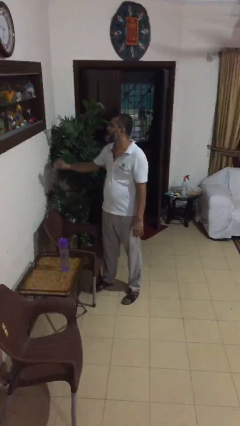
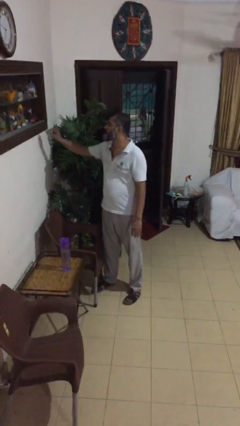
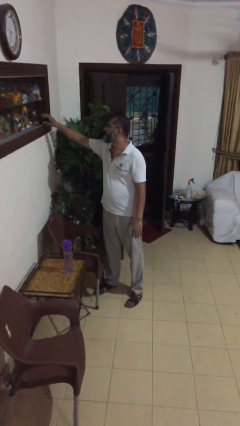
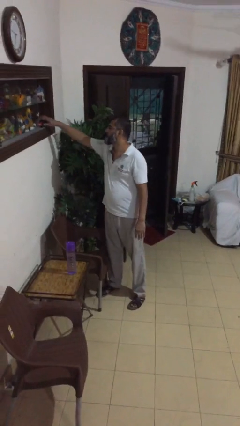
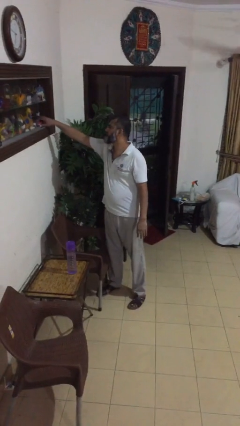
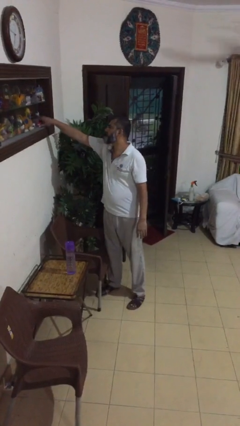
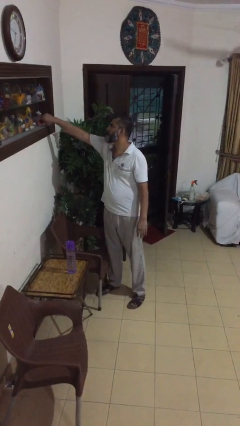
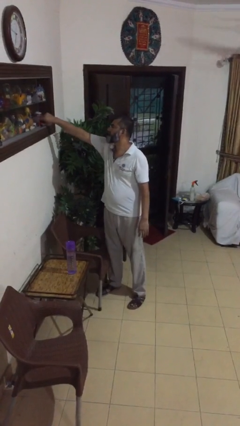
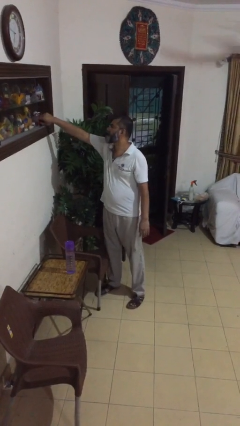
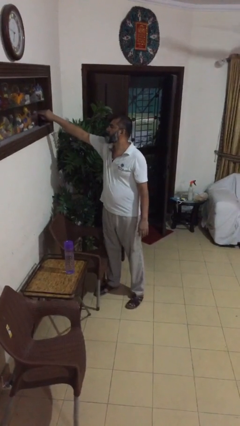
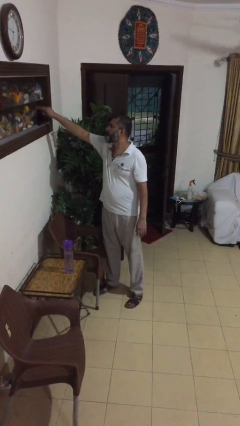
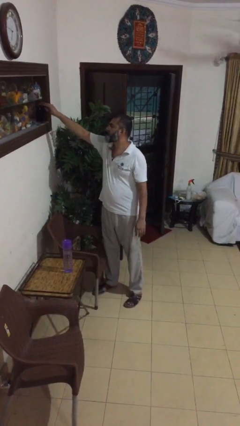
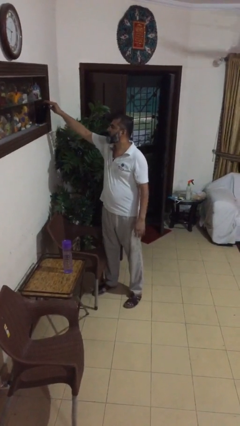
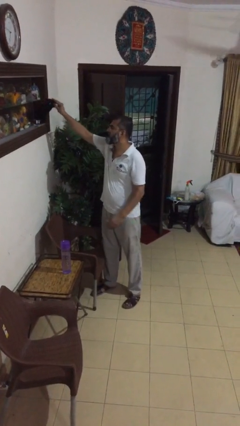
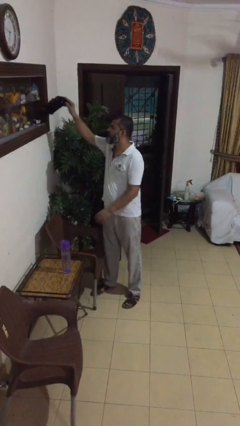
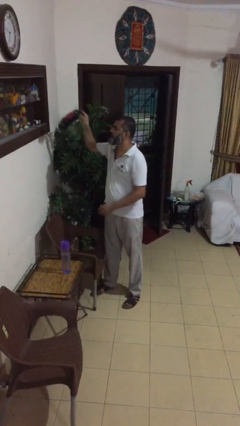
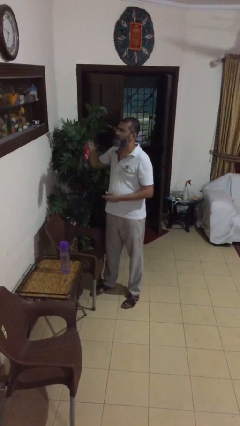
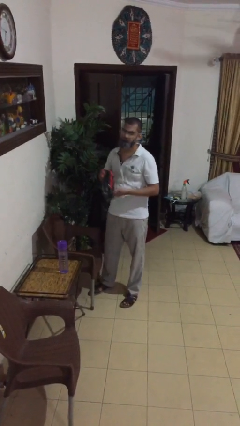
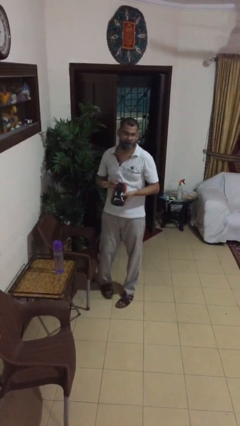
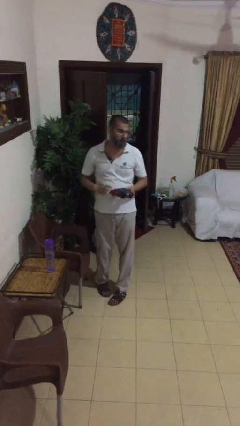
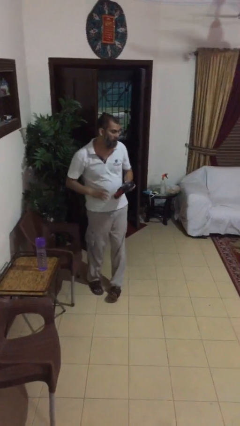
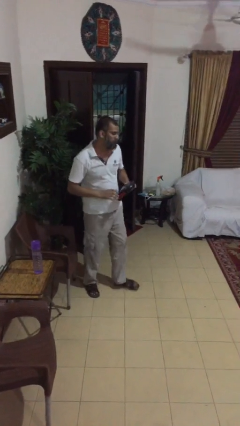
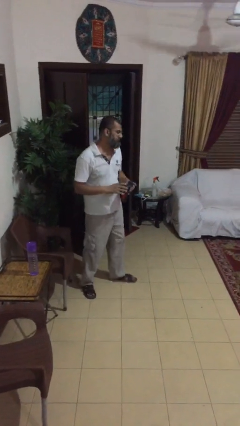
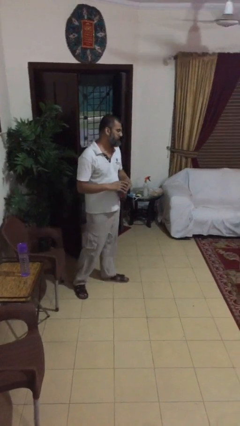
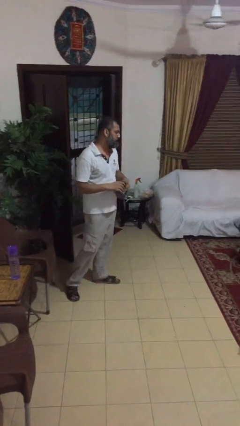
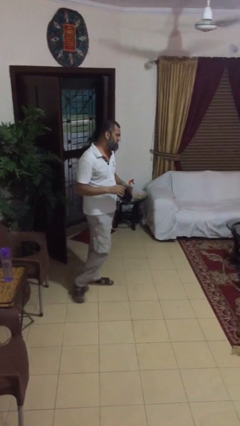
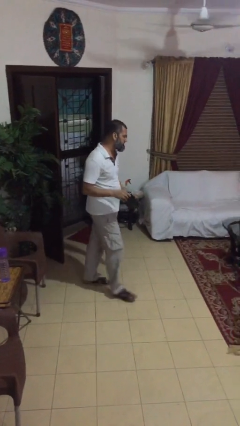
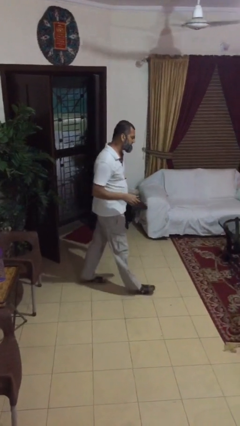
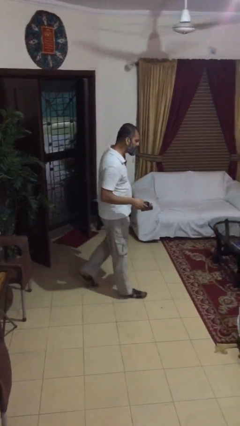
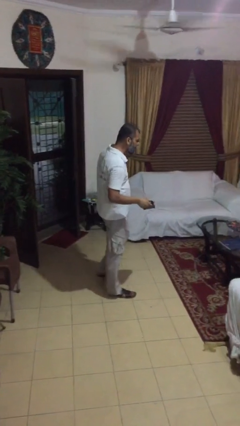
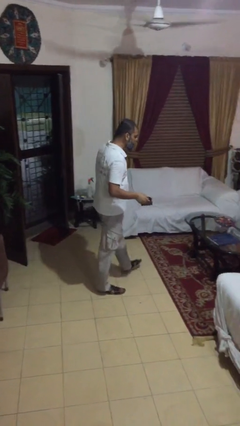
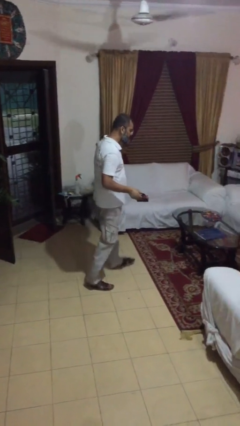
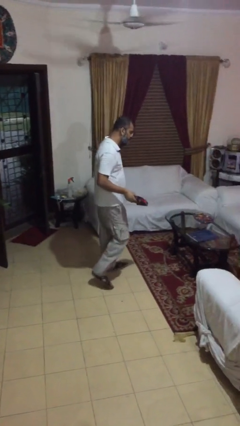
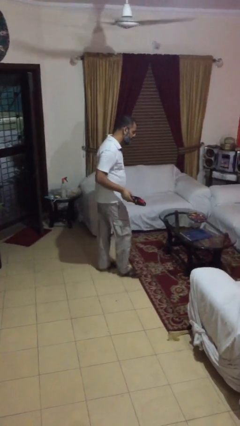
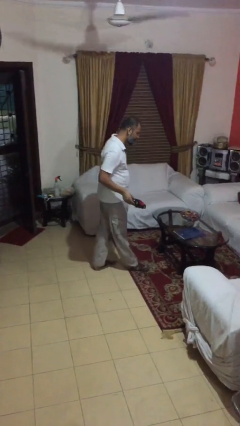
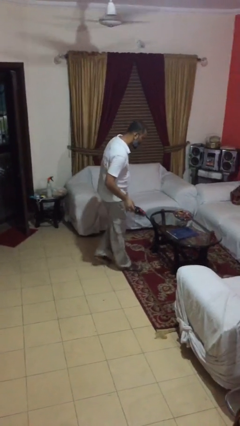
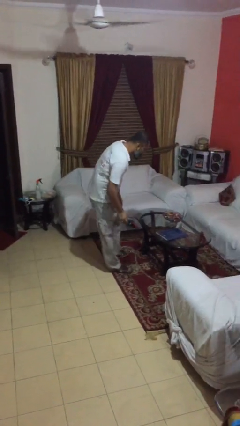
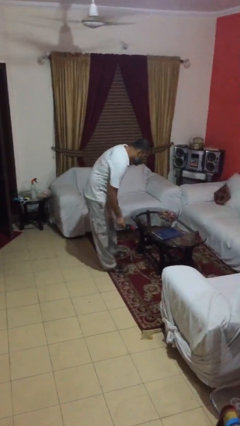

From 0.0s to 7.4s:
person picks up object from shelf

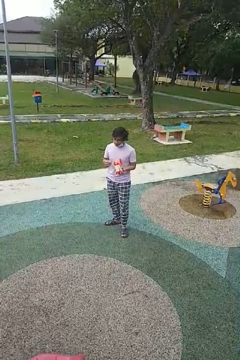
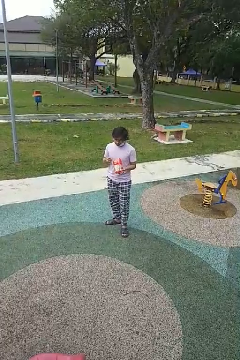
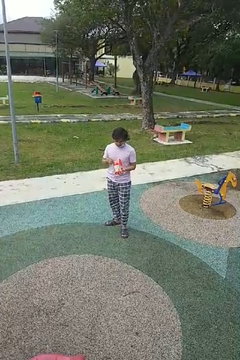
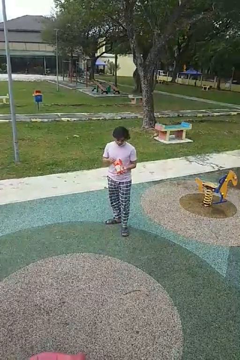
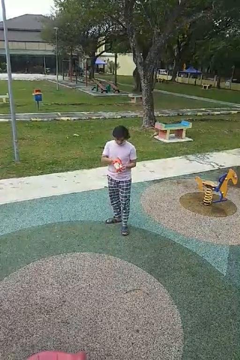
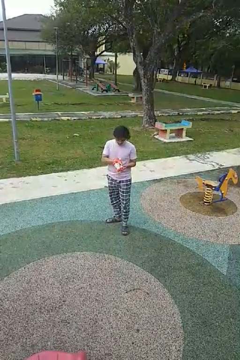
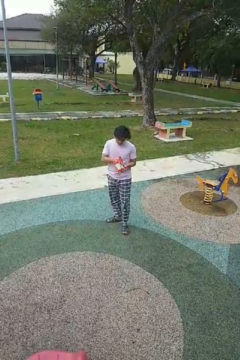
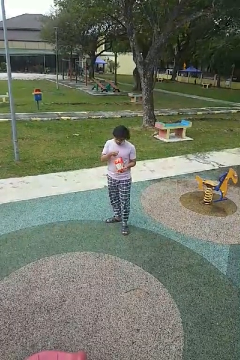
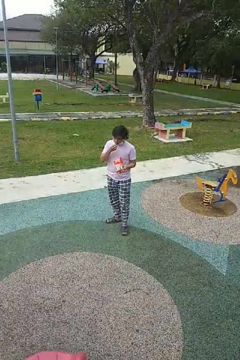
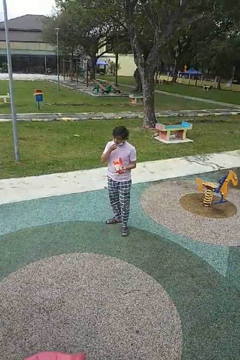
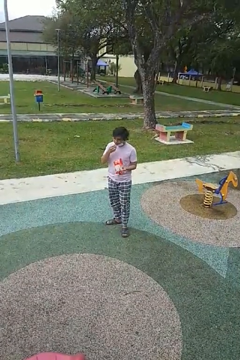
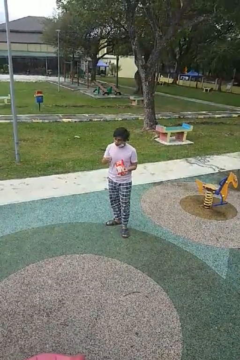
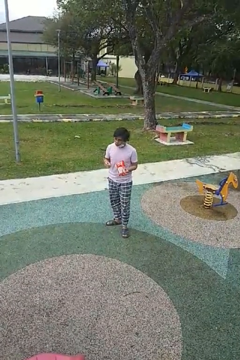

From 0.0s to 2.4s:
person eats snack from bag

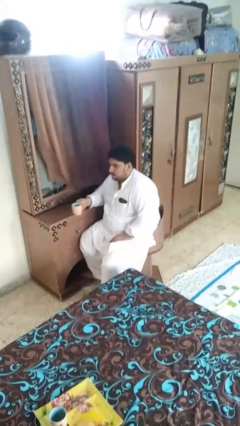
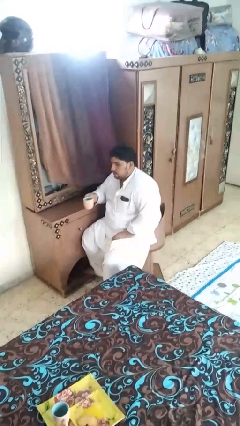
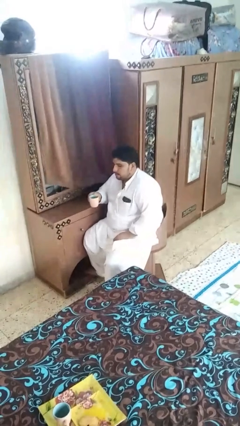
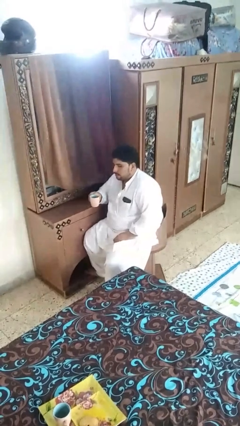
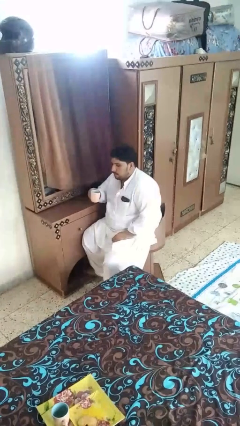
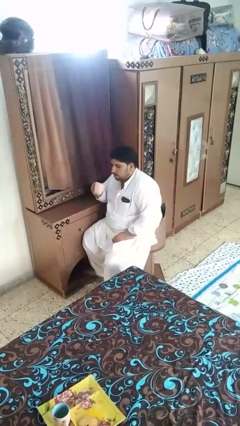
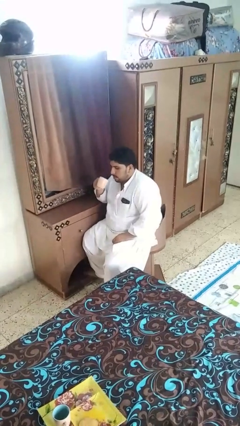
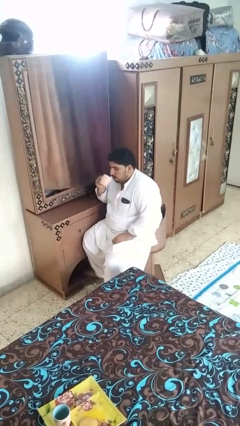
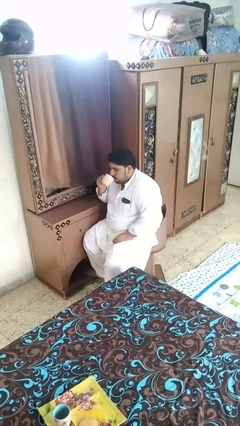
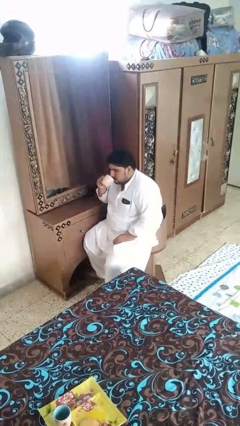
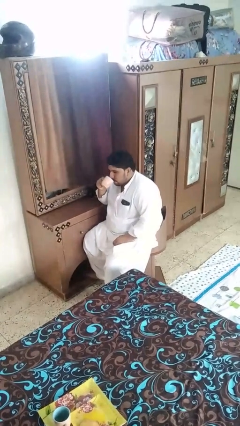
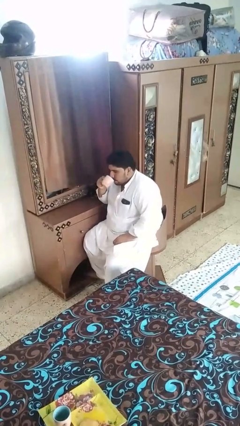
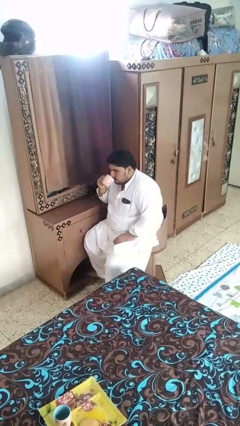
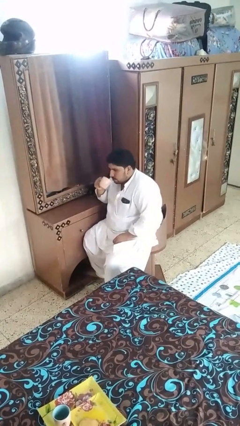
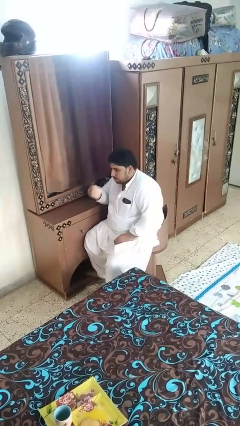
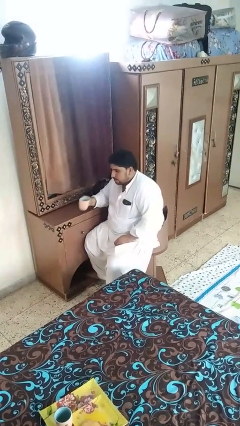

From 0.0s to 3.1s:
person drinks from mug

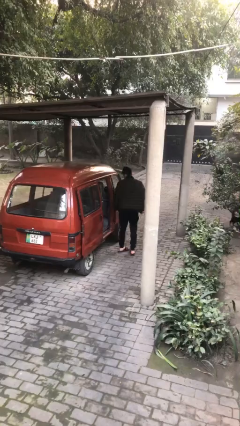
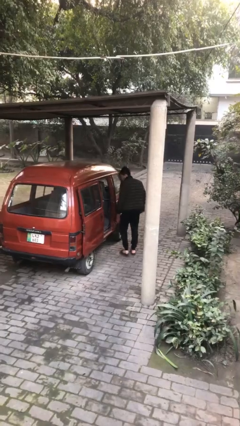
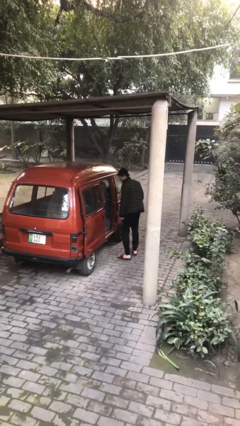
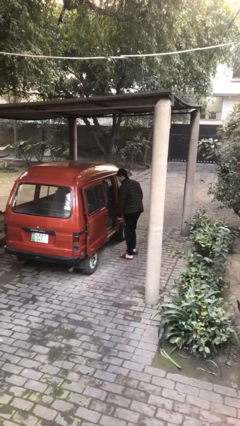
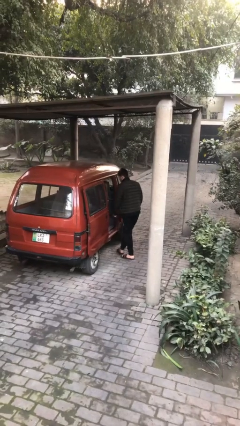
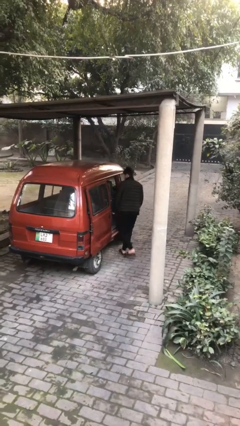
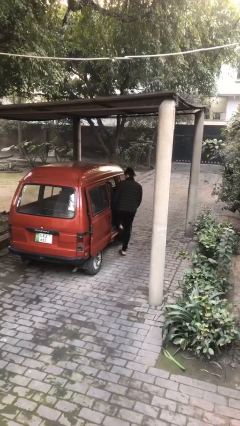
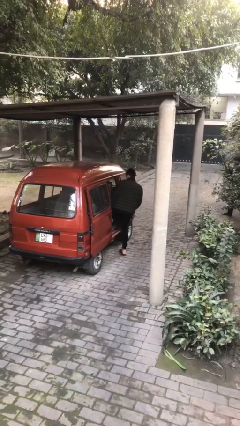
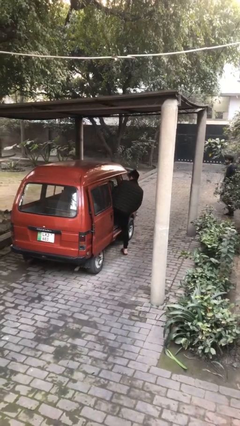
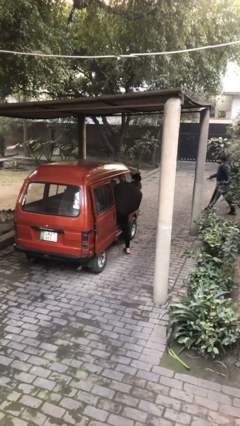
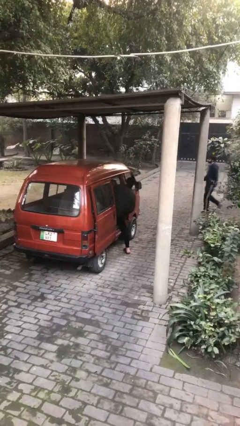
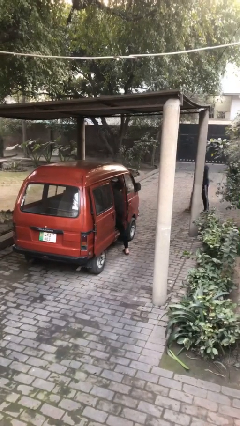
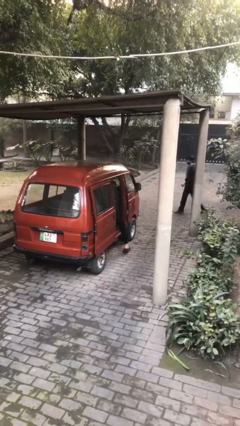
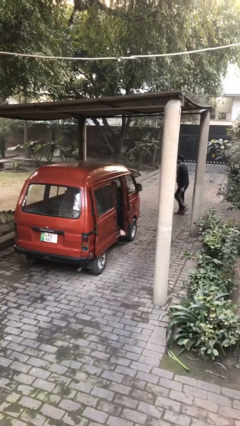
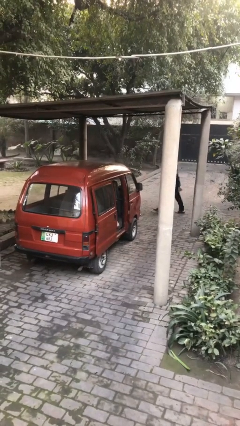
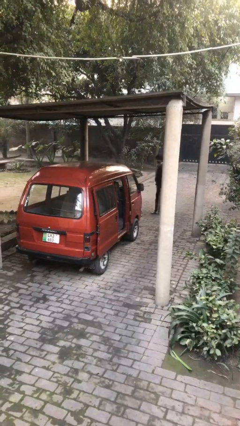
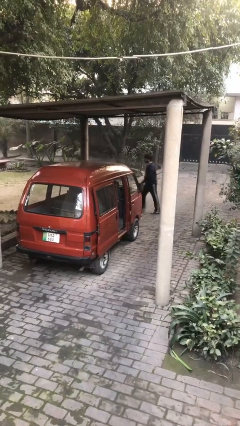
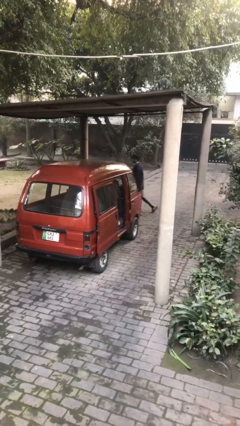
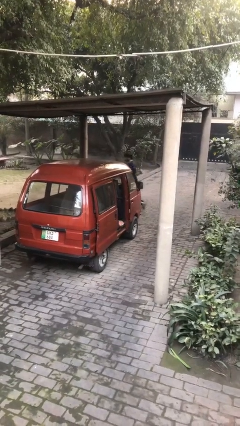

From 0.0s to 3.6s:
person enters car

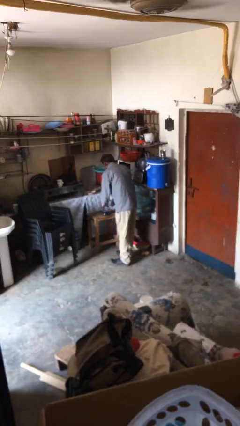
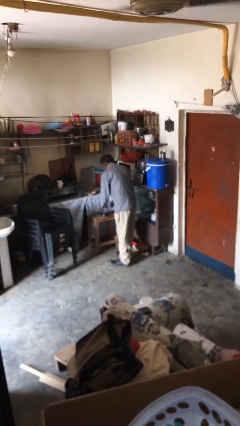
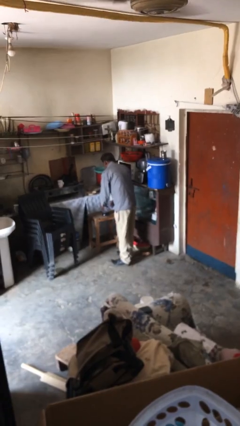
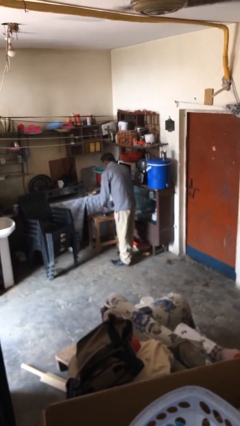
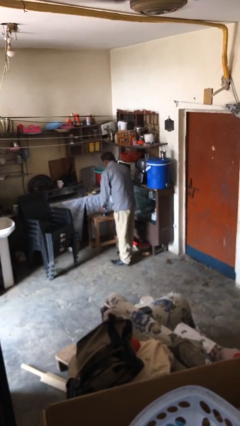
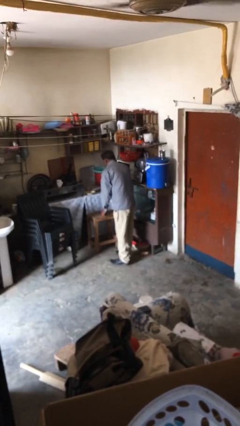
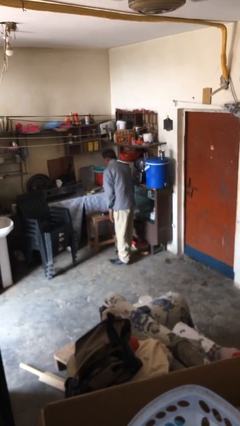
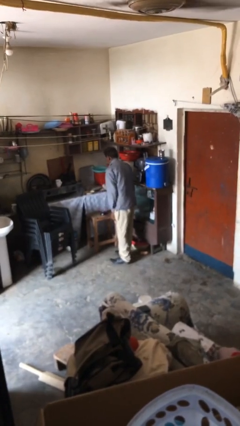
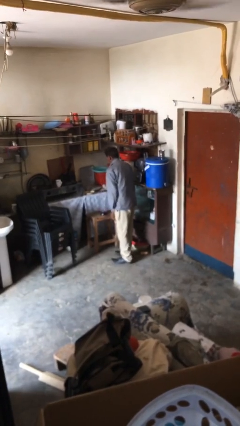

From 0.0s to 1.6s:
person puts down object on table
